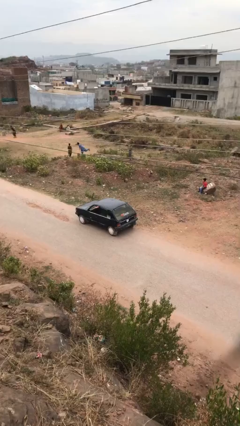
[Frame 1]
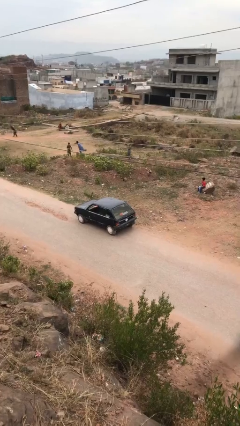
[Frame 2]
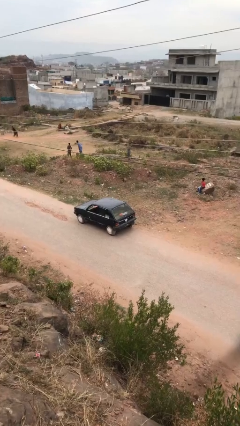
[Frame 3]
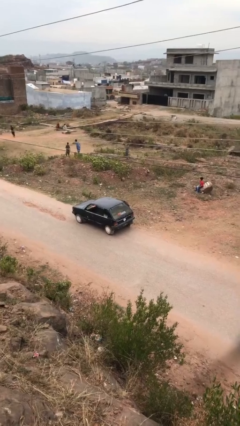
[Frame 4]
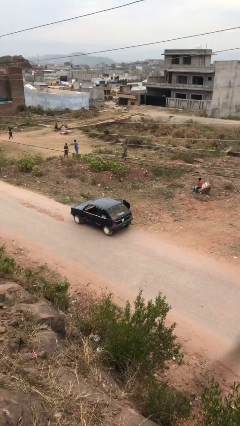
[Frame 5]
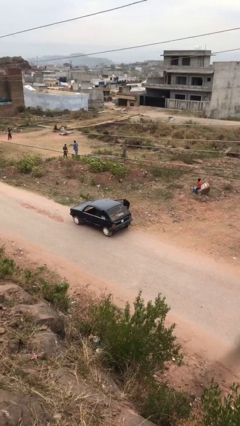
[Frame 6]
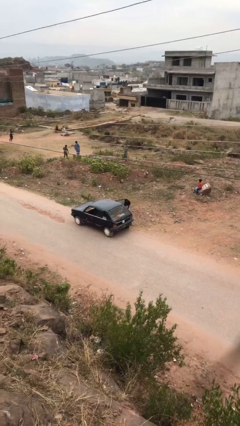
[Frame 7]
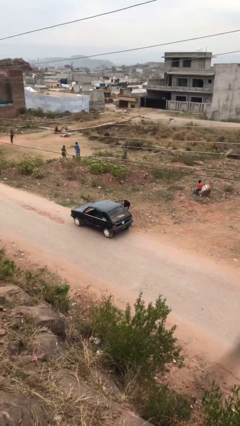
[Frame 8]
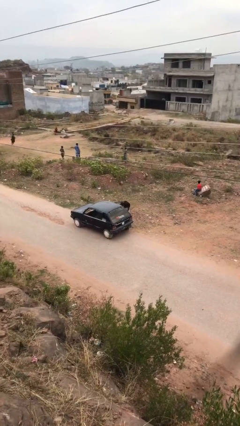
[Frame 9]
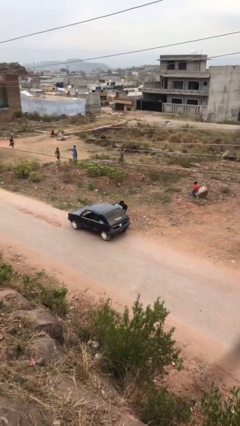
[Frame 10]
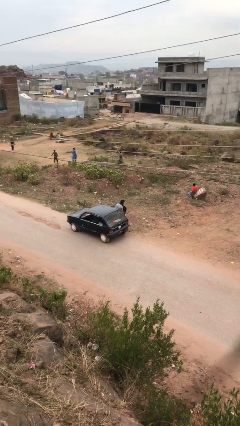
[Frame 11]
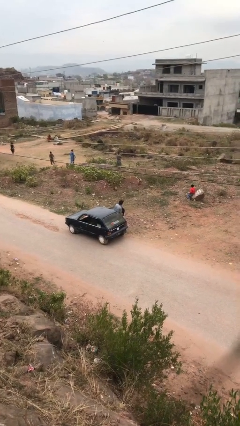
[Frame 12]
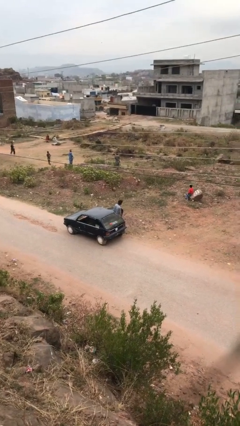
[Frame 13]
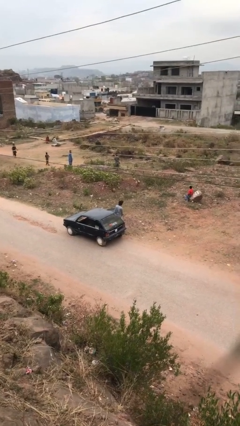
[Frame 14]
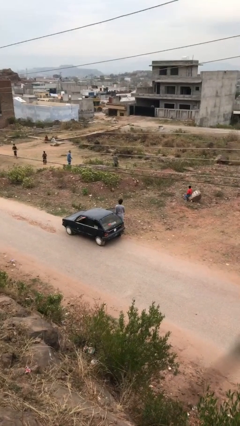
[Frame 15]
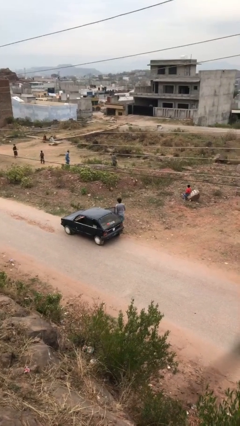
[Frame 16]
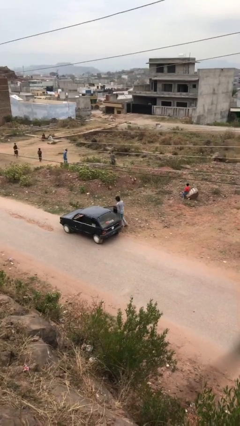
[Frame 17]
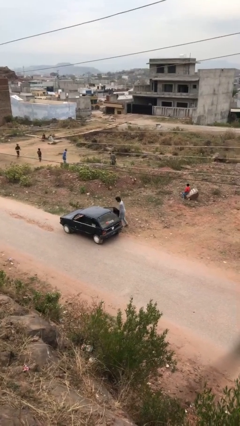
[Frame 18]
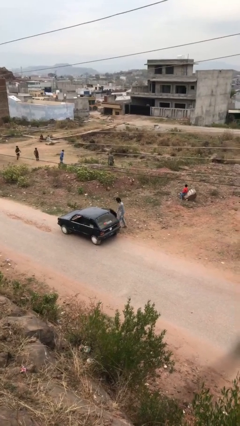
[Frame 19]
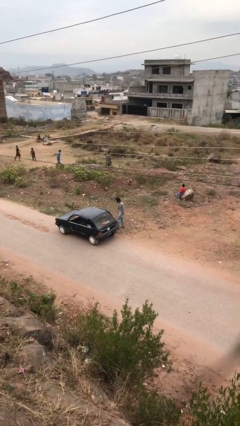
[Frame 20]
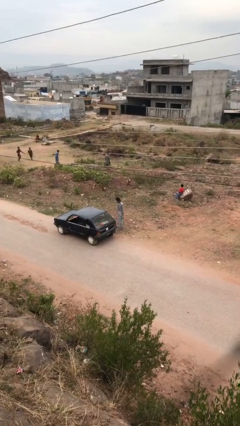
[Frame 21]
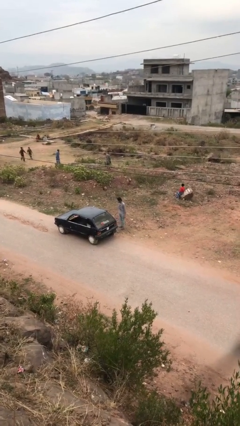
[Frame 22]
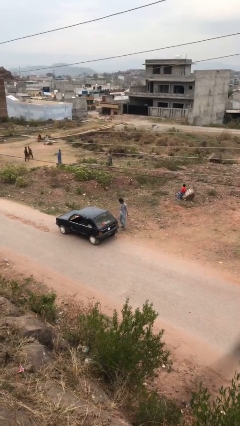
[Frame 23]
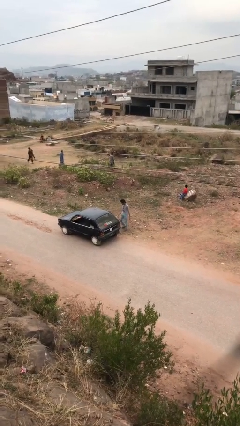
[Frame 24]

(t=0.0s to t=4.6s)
car drops off person

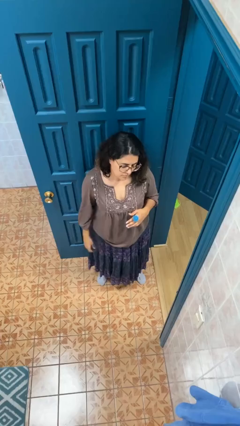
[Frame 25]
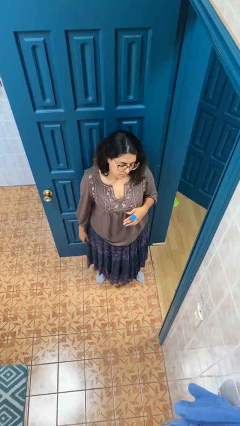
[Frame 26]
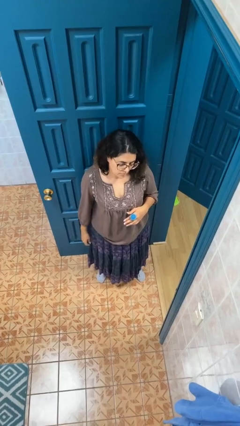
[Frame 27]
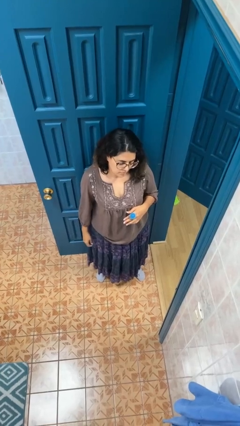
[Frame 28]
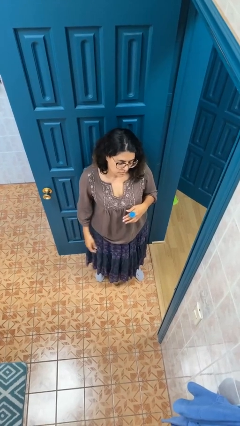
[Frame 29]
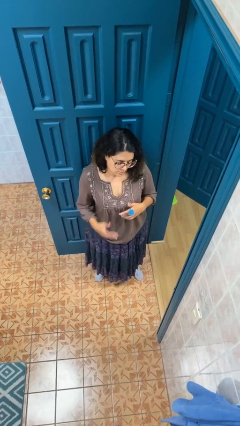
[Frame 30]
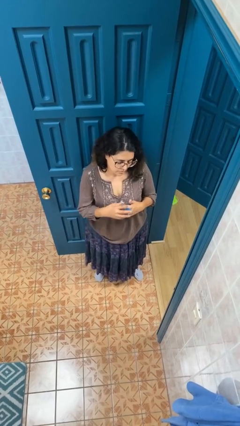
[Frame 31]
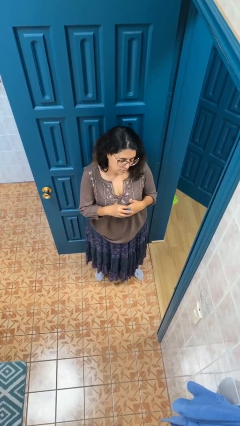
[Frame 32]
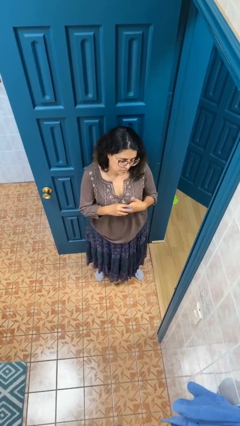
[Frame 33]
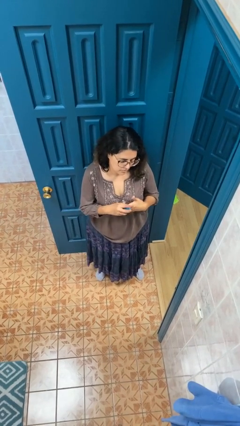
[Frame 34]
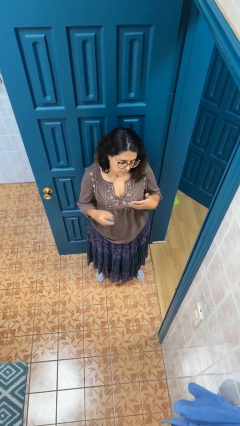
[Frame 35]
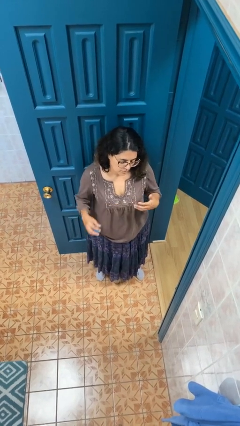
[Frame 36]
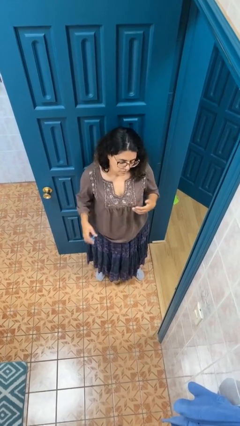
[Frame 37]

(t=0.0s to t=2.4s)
person takes off ring

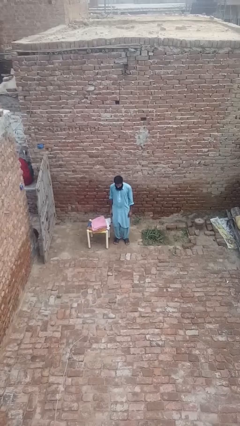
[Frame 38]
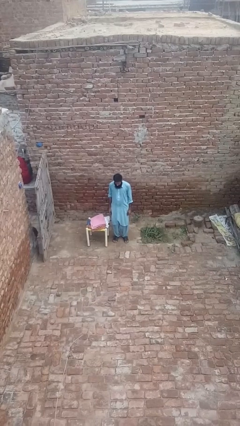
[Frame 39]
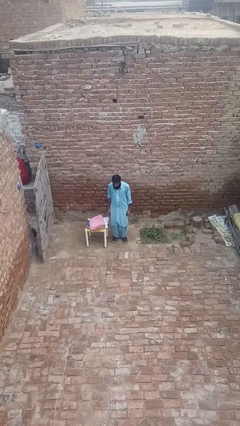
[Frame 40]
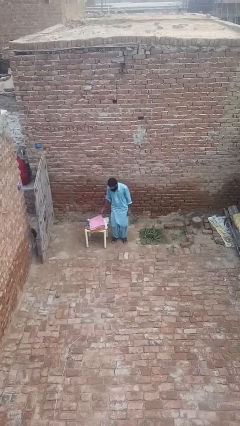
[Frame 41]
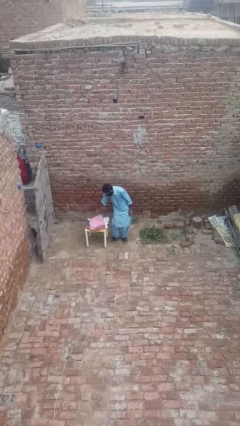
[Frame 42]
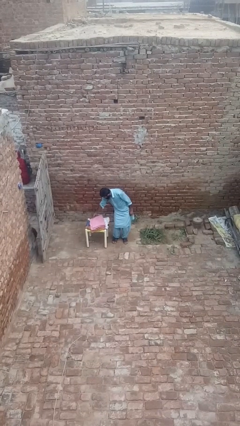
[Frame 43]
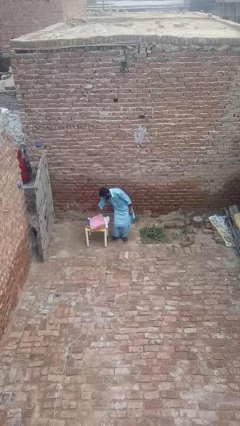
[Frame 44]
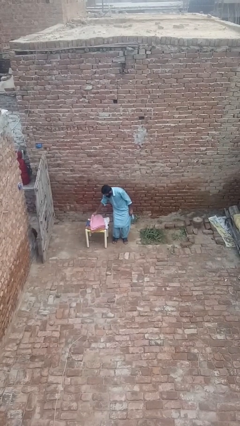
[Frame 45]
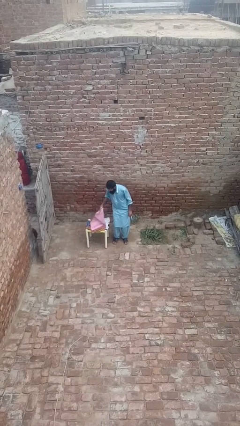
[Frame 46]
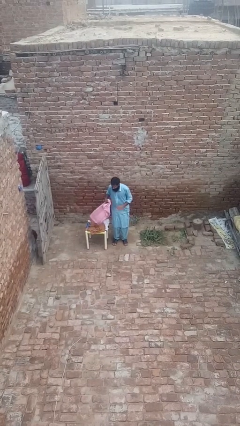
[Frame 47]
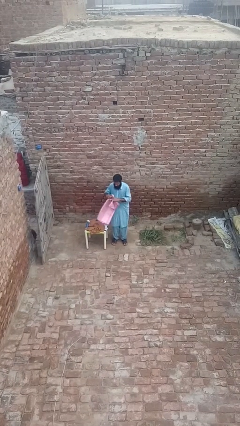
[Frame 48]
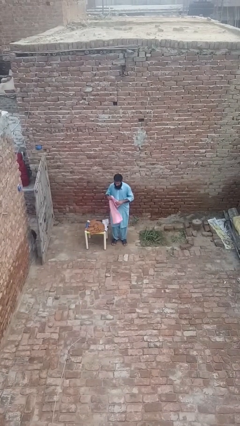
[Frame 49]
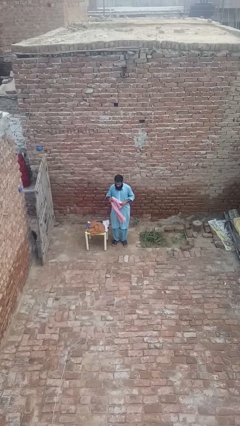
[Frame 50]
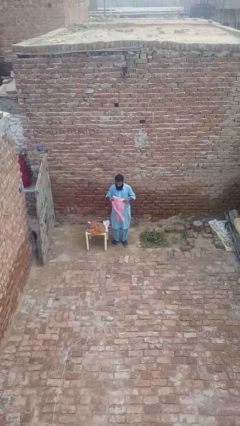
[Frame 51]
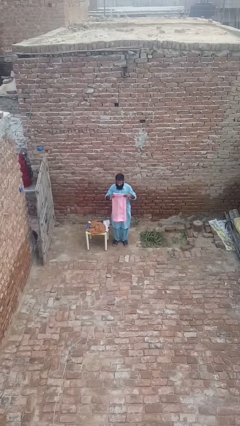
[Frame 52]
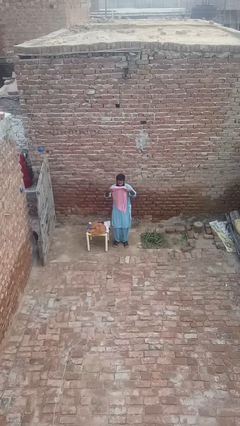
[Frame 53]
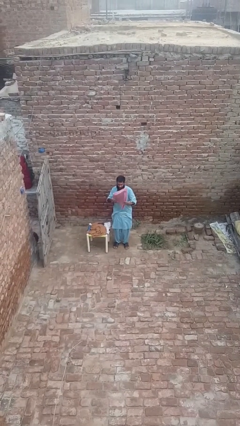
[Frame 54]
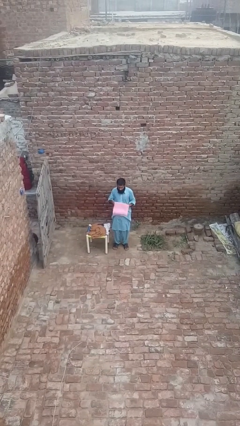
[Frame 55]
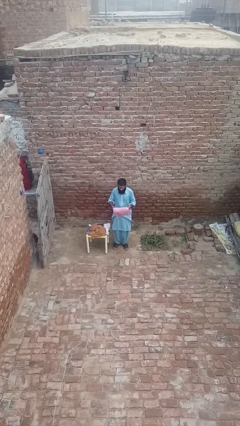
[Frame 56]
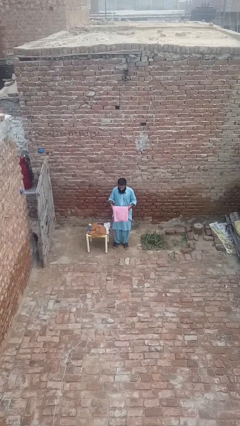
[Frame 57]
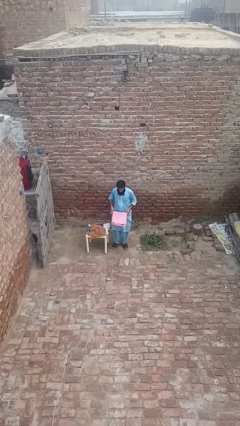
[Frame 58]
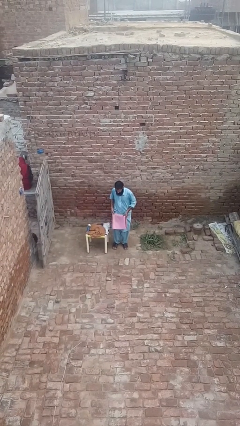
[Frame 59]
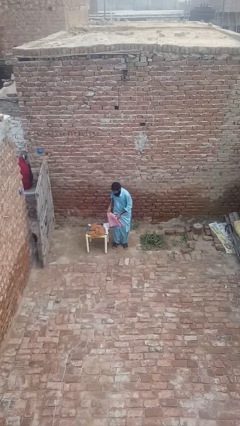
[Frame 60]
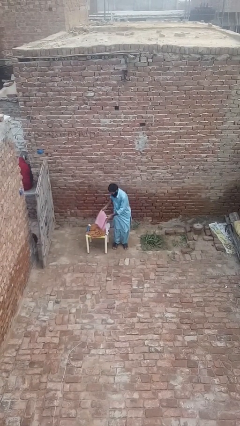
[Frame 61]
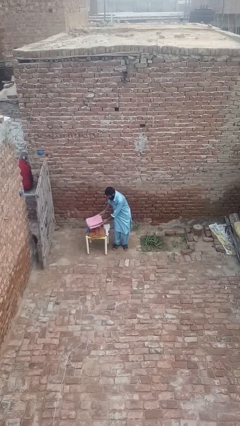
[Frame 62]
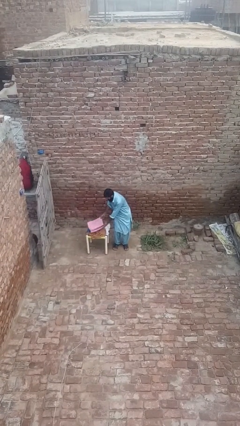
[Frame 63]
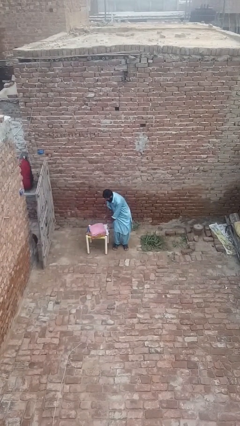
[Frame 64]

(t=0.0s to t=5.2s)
person folds towel

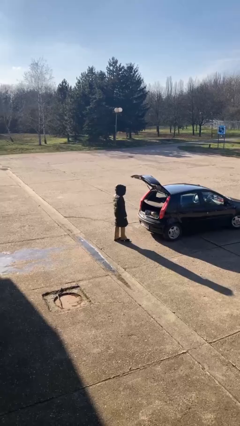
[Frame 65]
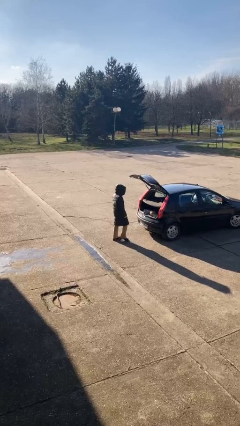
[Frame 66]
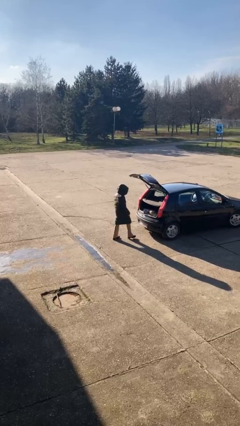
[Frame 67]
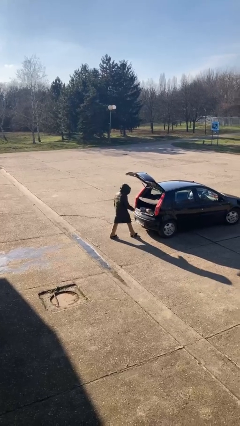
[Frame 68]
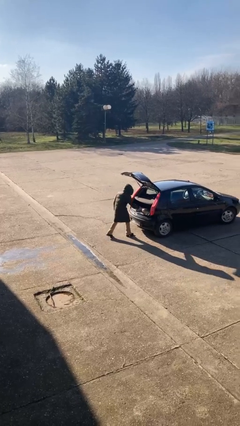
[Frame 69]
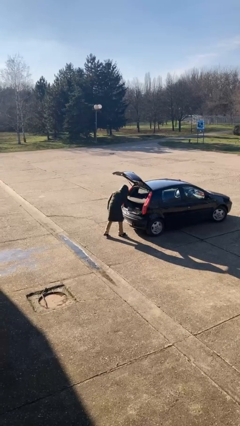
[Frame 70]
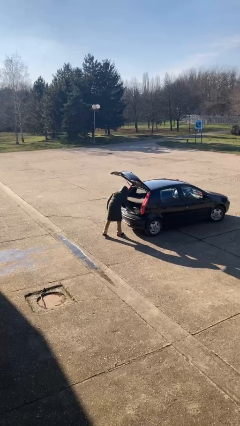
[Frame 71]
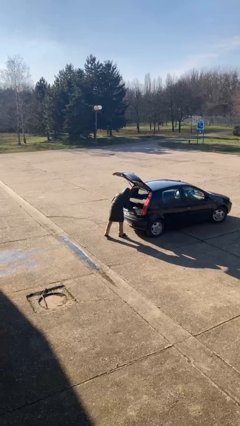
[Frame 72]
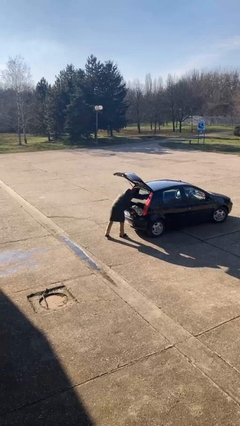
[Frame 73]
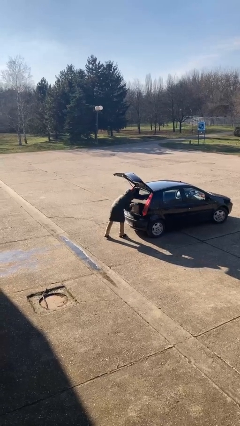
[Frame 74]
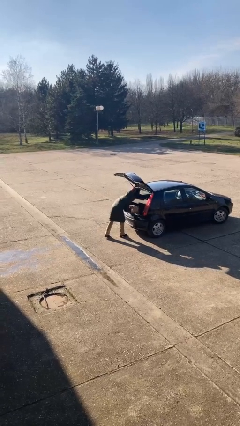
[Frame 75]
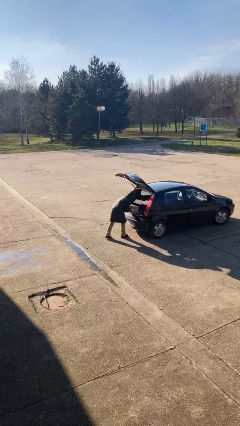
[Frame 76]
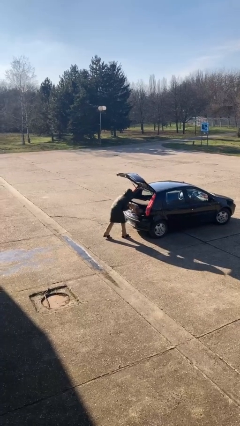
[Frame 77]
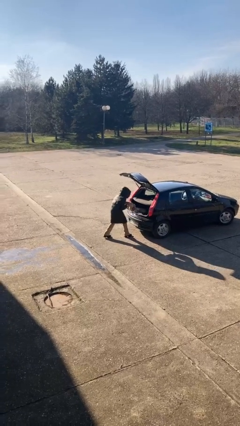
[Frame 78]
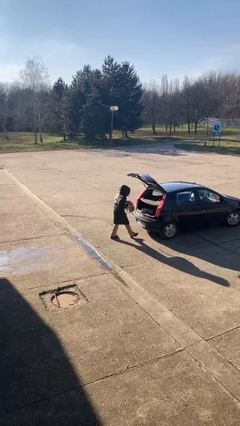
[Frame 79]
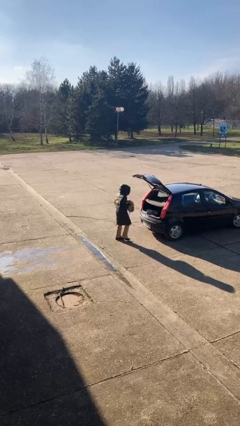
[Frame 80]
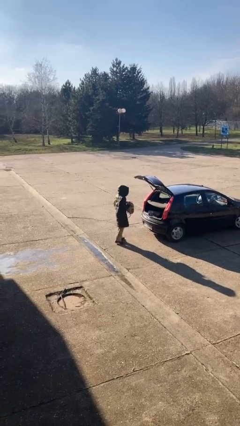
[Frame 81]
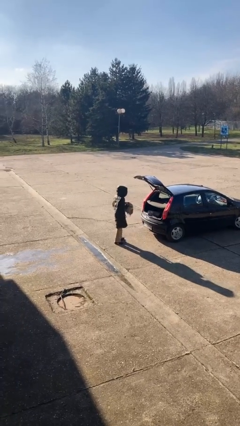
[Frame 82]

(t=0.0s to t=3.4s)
person unloads car

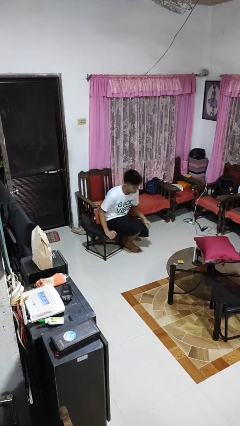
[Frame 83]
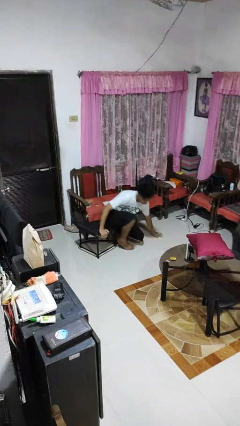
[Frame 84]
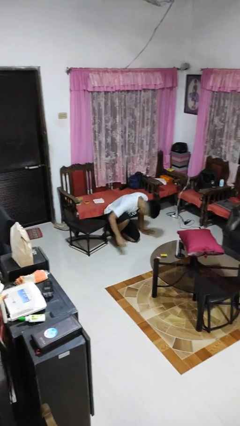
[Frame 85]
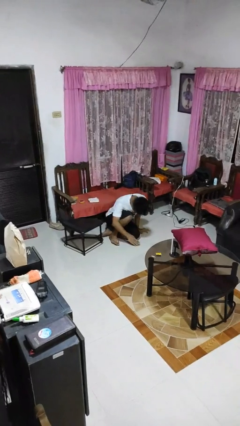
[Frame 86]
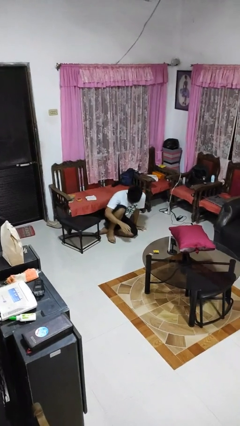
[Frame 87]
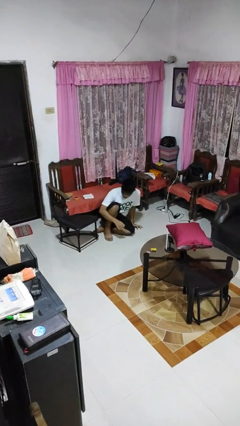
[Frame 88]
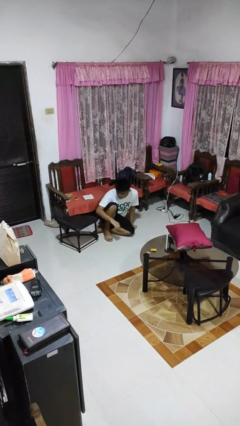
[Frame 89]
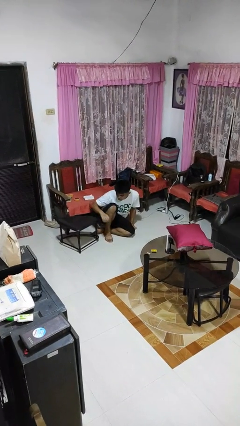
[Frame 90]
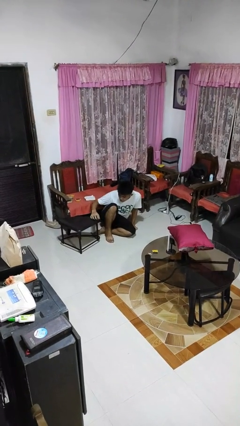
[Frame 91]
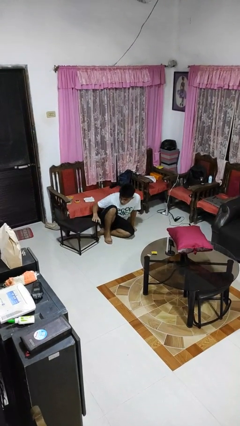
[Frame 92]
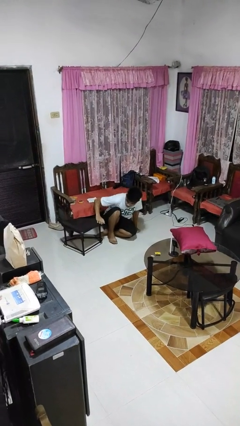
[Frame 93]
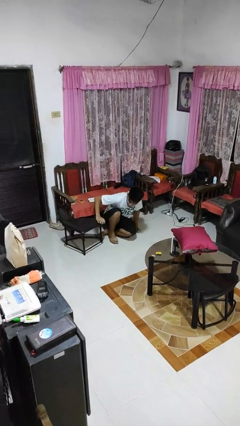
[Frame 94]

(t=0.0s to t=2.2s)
person falls from chair
